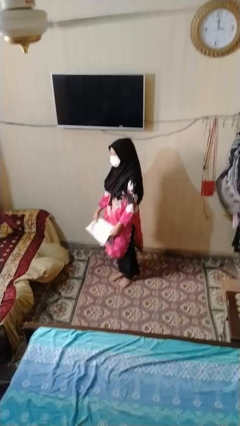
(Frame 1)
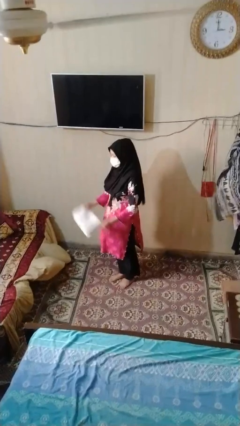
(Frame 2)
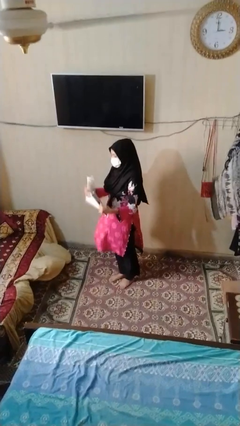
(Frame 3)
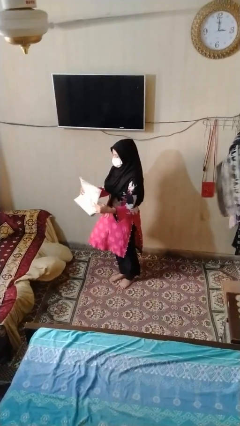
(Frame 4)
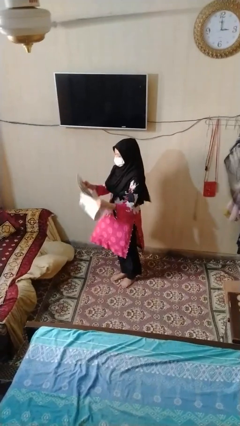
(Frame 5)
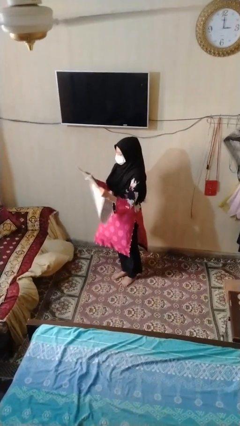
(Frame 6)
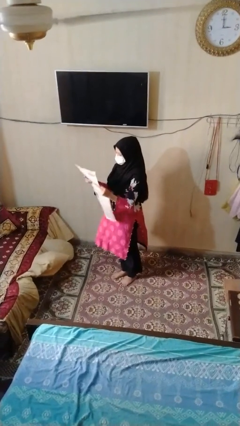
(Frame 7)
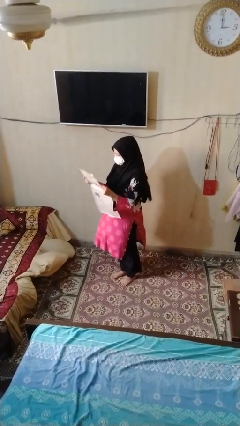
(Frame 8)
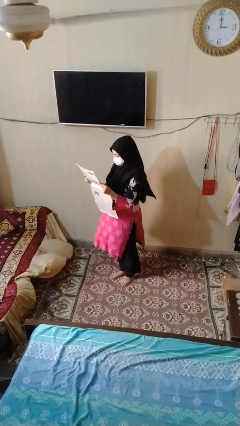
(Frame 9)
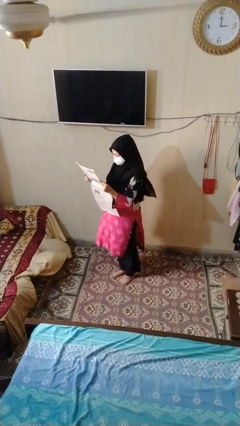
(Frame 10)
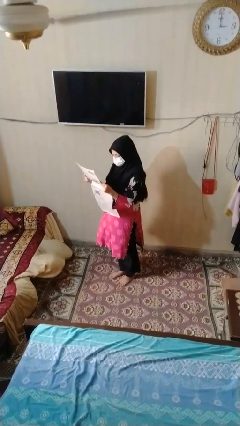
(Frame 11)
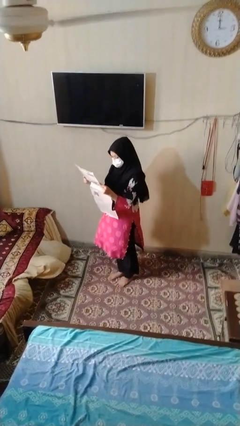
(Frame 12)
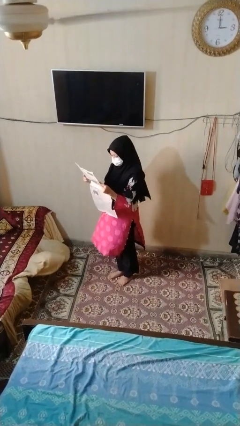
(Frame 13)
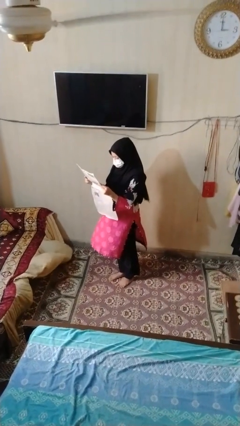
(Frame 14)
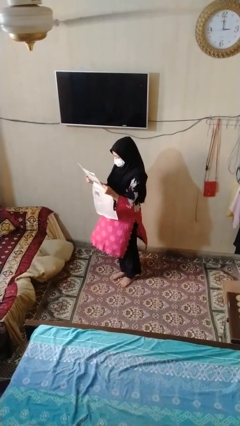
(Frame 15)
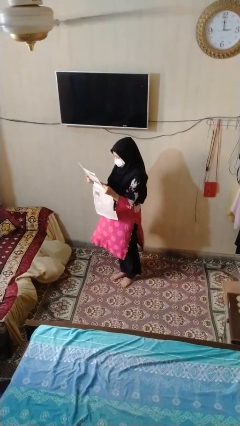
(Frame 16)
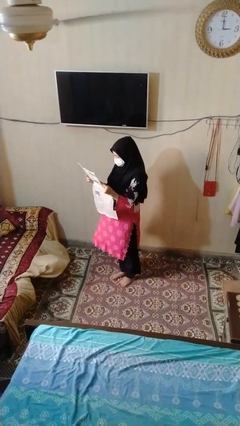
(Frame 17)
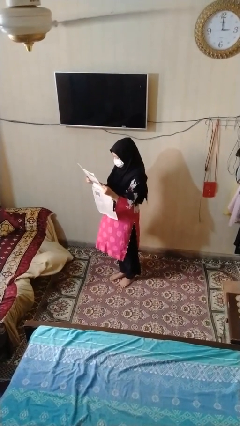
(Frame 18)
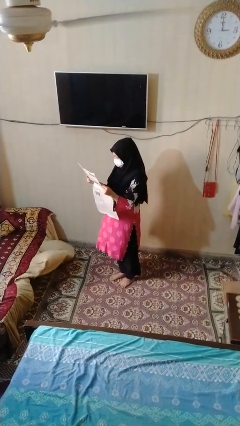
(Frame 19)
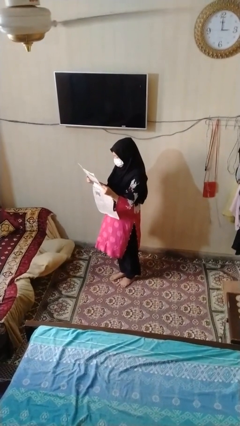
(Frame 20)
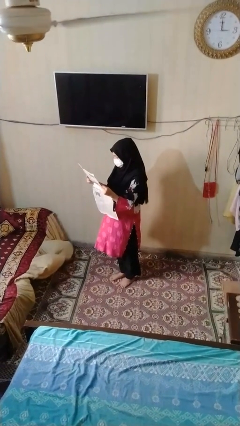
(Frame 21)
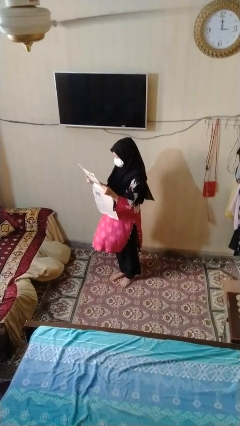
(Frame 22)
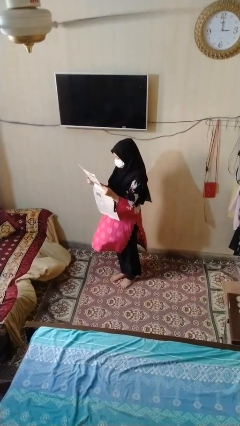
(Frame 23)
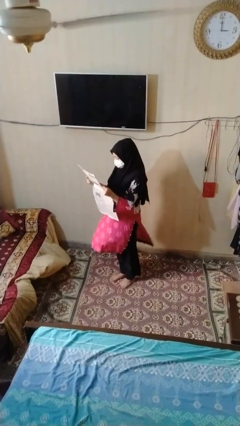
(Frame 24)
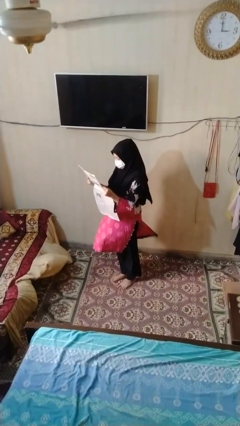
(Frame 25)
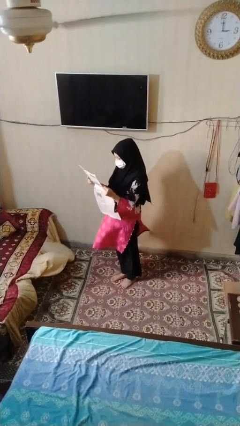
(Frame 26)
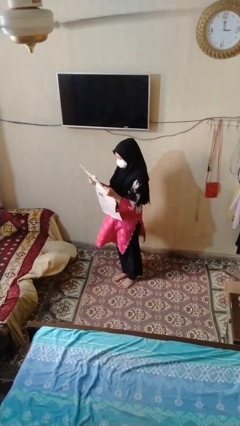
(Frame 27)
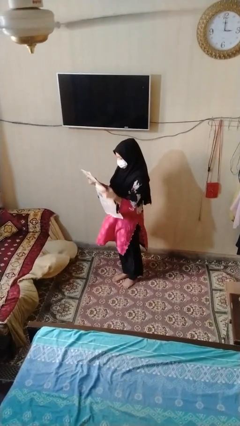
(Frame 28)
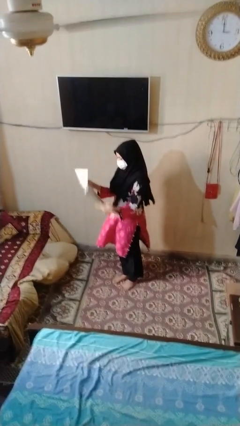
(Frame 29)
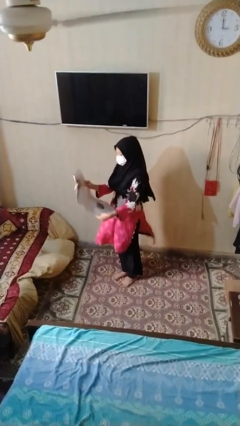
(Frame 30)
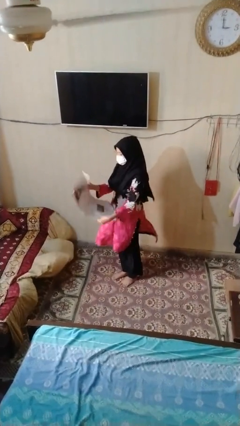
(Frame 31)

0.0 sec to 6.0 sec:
person reads newspaper

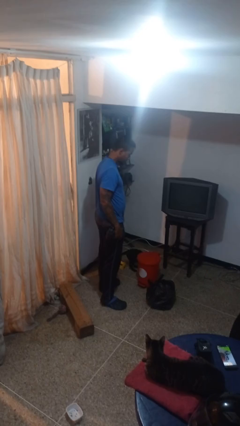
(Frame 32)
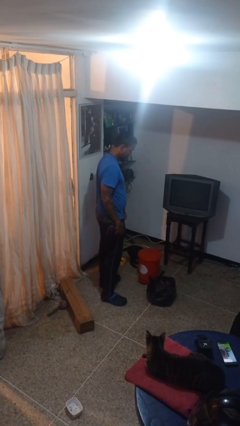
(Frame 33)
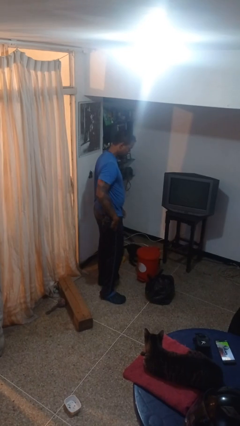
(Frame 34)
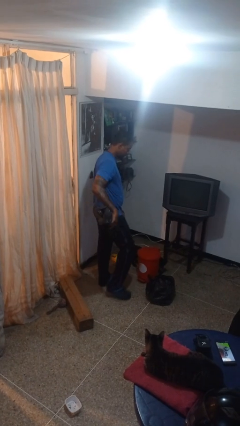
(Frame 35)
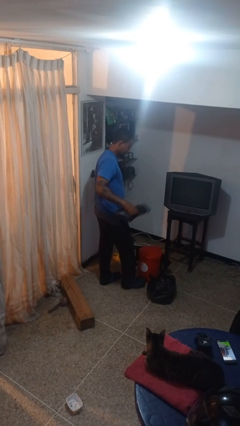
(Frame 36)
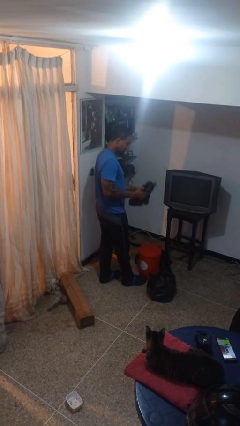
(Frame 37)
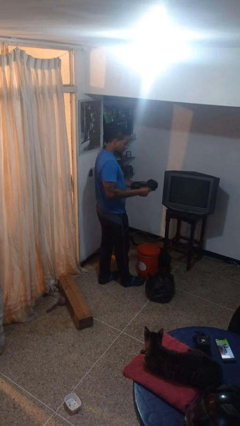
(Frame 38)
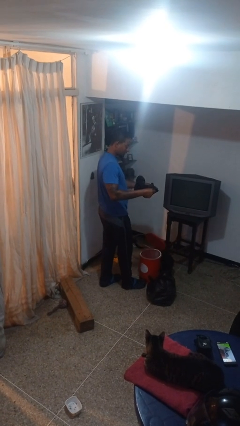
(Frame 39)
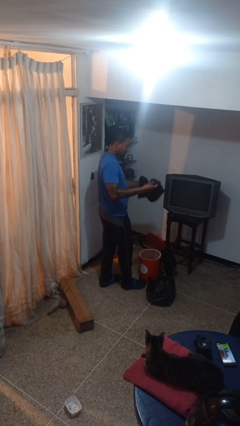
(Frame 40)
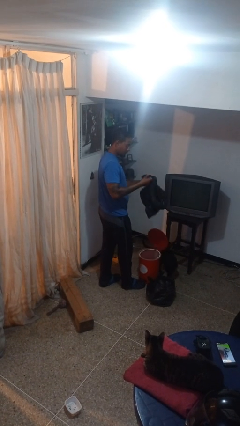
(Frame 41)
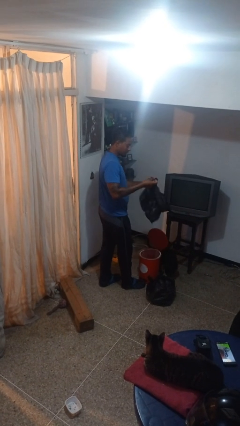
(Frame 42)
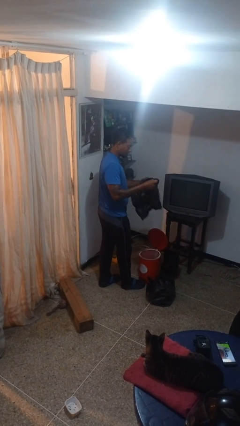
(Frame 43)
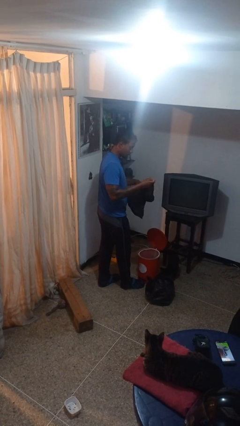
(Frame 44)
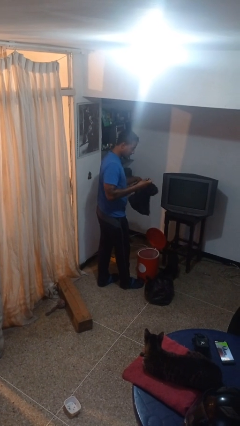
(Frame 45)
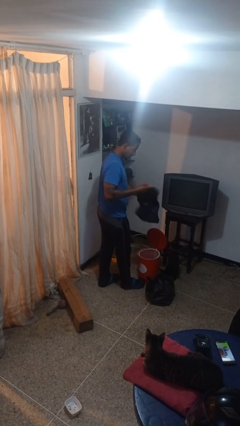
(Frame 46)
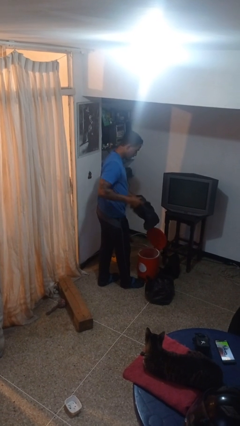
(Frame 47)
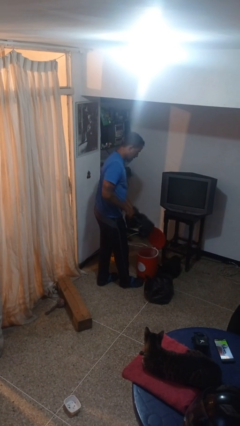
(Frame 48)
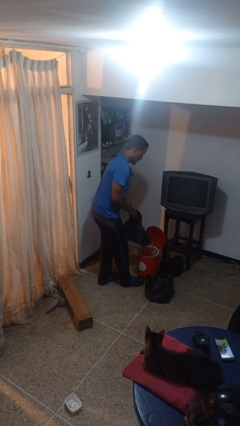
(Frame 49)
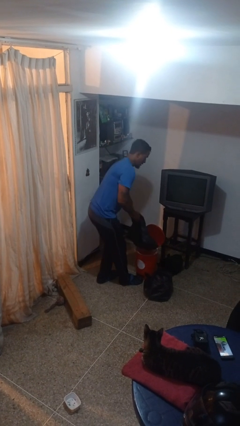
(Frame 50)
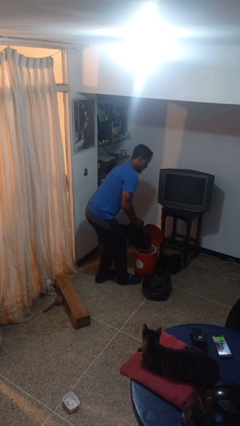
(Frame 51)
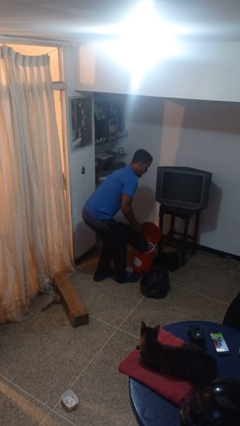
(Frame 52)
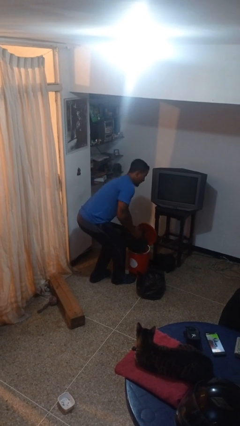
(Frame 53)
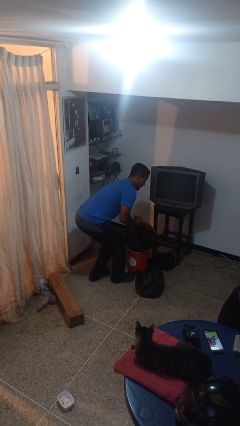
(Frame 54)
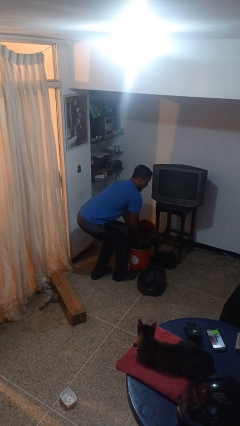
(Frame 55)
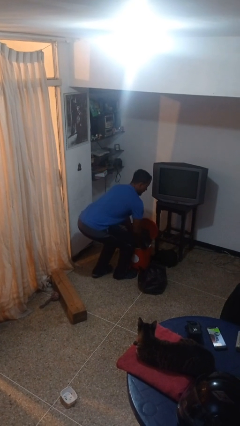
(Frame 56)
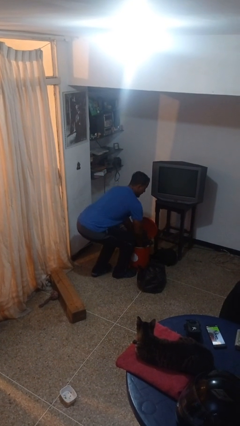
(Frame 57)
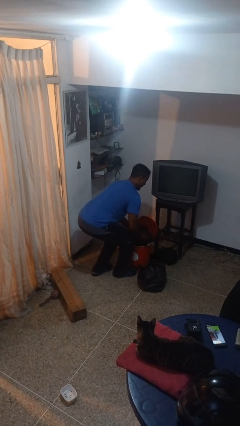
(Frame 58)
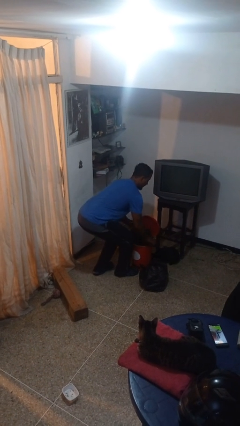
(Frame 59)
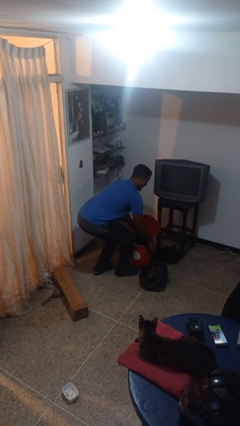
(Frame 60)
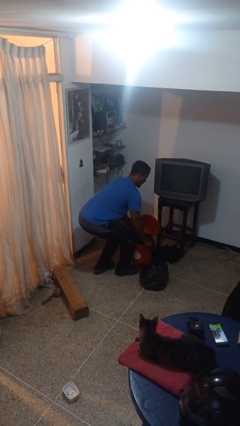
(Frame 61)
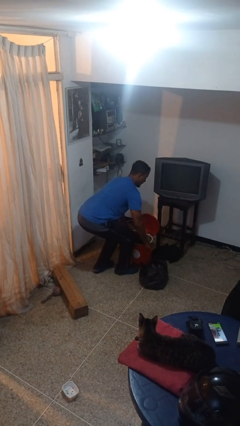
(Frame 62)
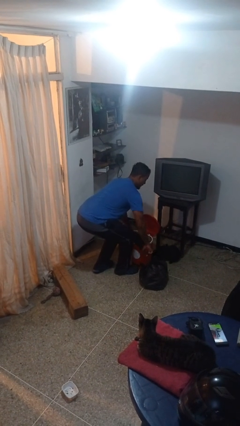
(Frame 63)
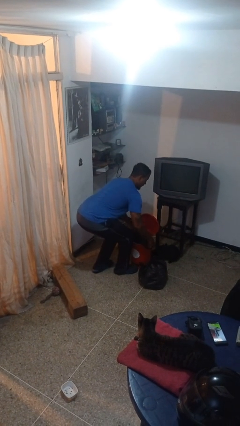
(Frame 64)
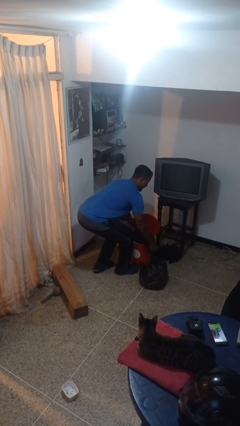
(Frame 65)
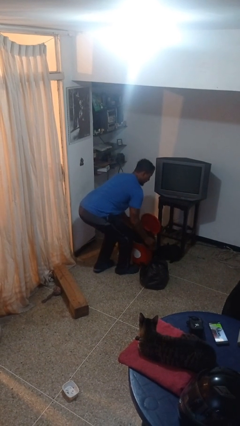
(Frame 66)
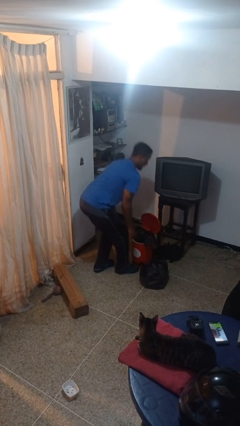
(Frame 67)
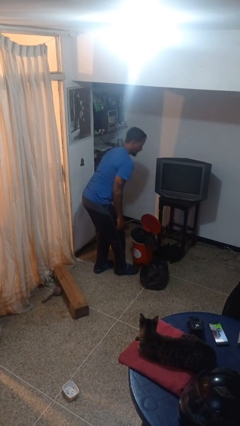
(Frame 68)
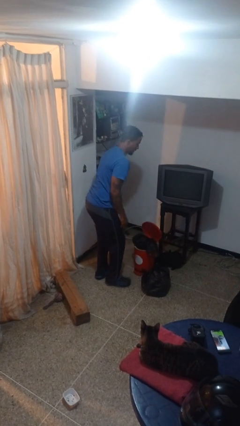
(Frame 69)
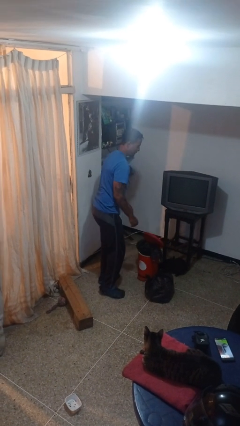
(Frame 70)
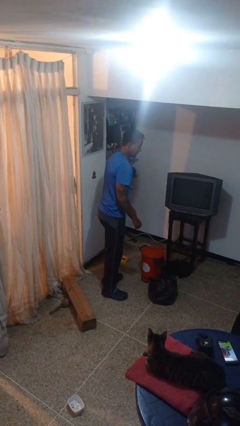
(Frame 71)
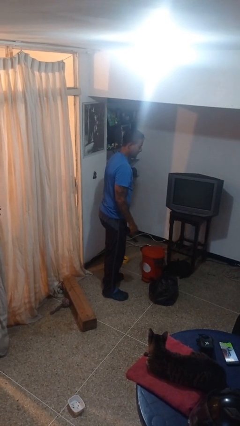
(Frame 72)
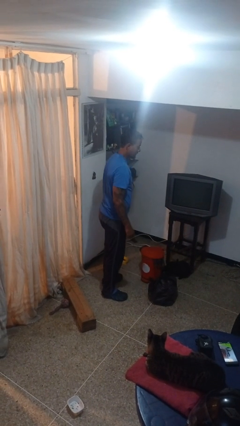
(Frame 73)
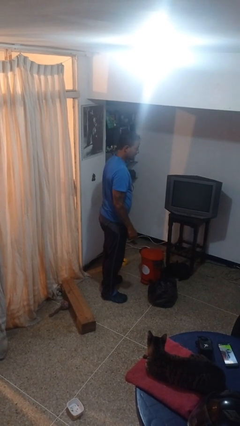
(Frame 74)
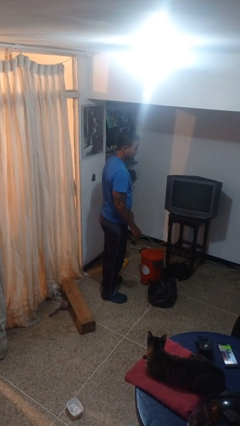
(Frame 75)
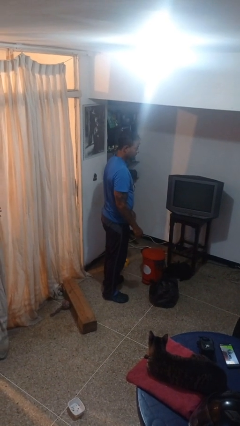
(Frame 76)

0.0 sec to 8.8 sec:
person inserts trashbag into trashcan

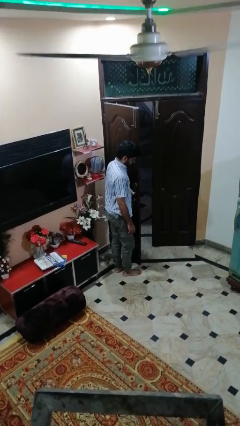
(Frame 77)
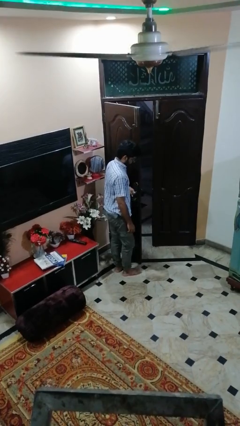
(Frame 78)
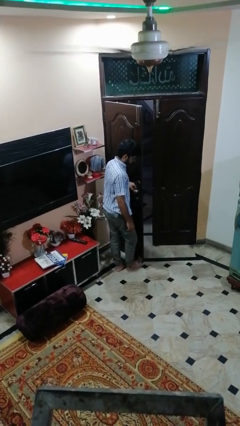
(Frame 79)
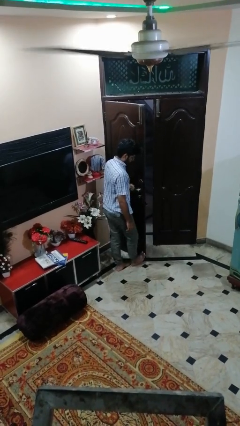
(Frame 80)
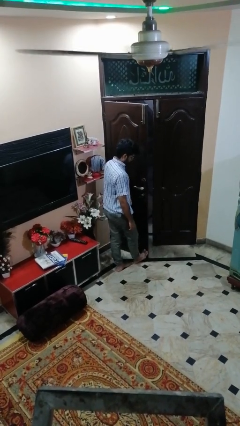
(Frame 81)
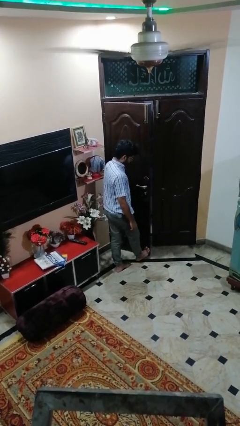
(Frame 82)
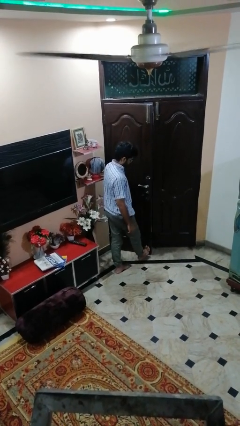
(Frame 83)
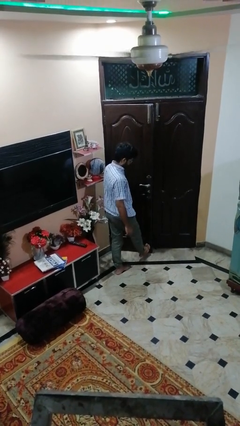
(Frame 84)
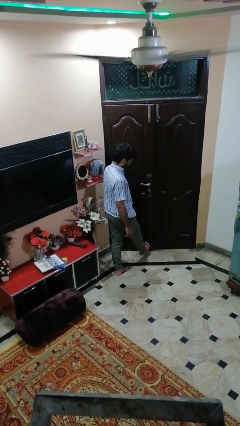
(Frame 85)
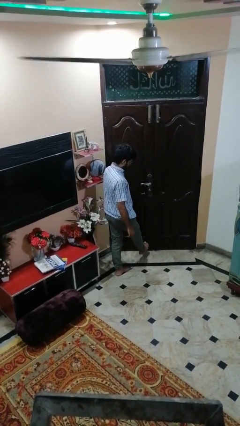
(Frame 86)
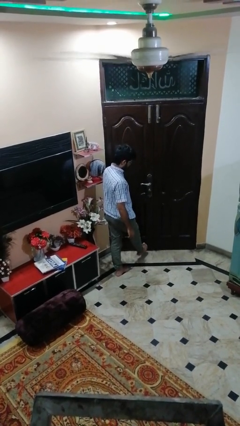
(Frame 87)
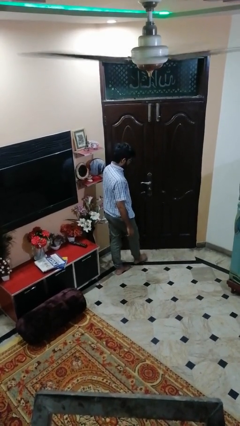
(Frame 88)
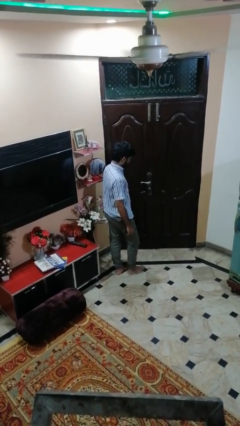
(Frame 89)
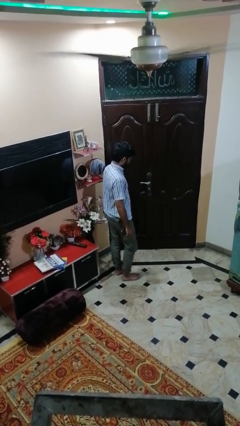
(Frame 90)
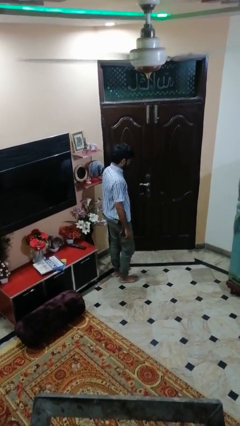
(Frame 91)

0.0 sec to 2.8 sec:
person closes door with foot
